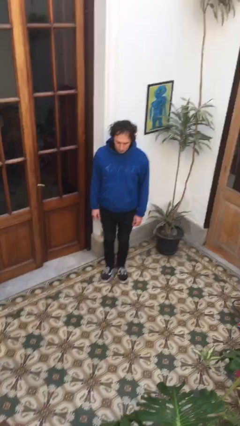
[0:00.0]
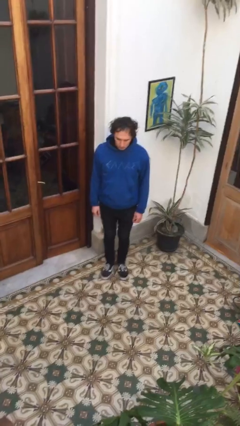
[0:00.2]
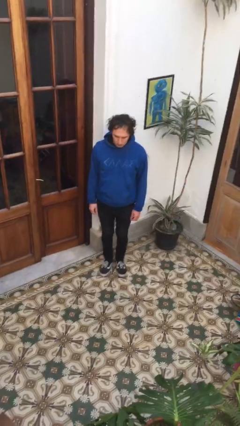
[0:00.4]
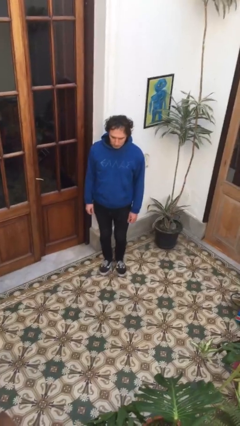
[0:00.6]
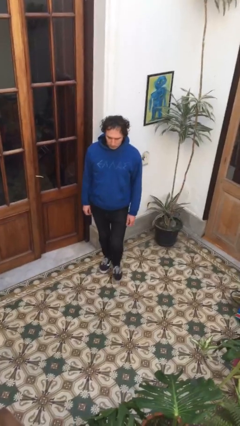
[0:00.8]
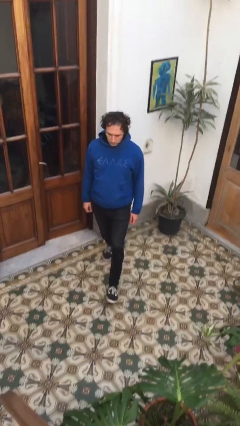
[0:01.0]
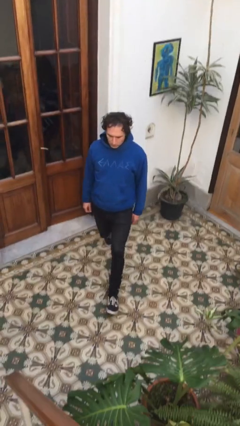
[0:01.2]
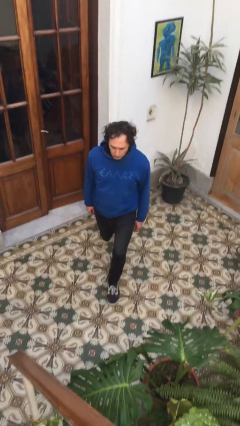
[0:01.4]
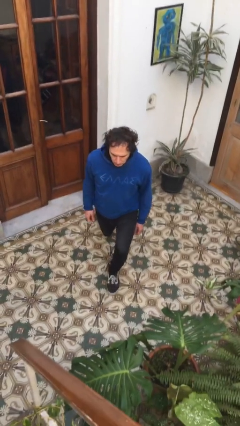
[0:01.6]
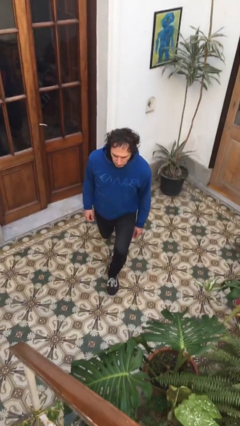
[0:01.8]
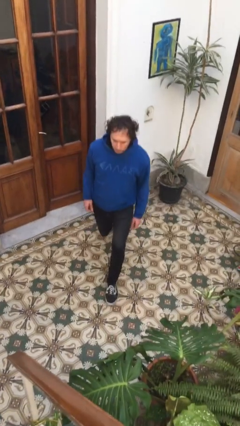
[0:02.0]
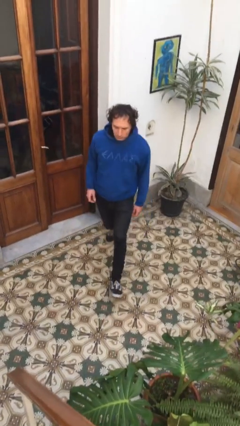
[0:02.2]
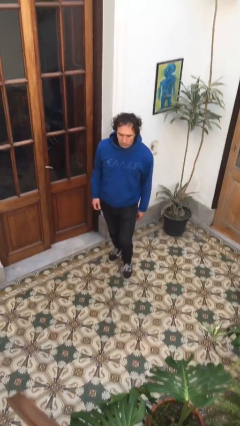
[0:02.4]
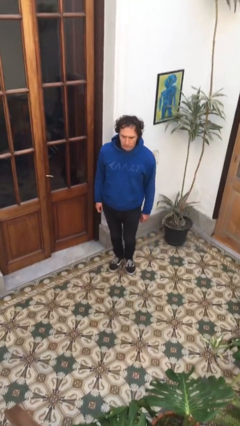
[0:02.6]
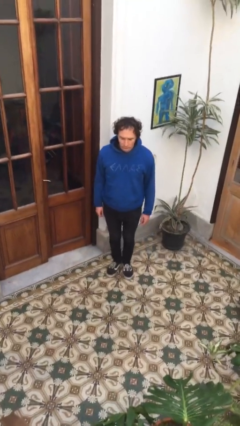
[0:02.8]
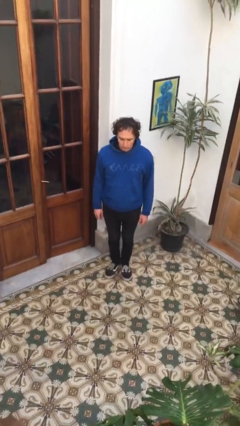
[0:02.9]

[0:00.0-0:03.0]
person exercises with lunges

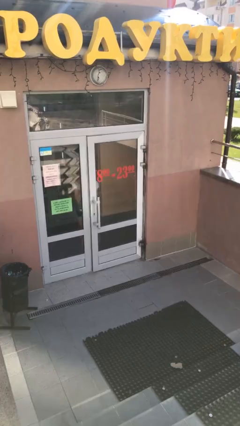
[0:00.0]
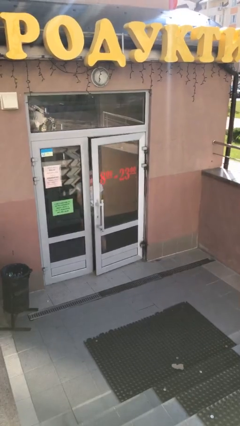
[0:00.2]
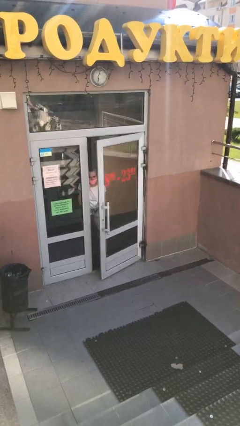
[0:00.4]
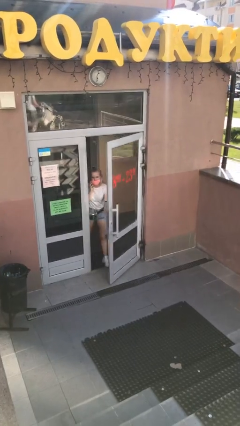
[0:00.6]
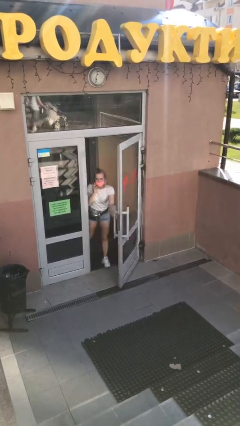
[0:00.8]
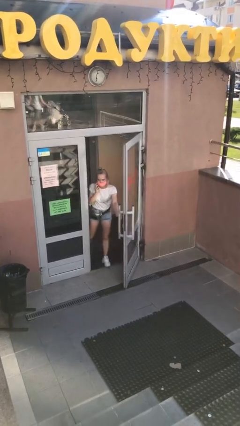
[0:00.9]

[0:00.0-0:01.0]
person opens facility door

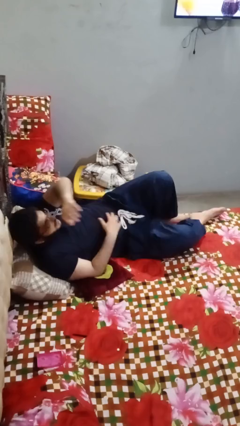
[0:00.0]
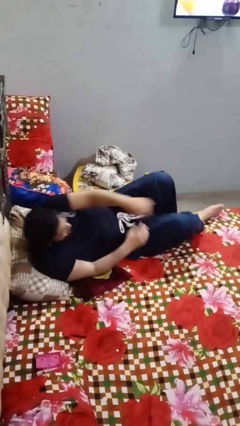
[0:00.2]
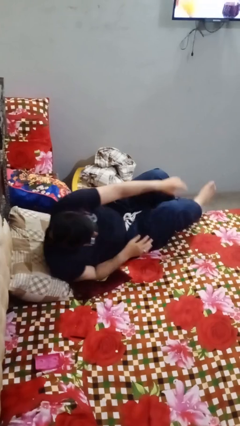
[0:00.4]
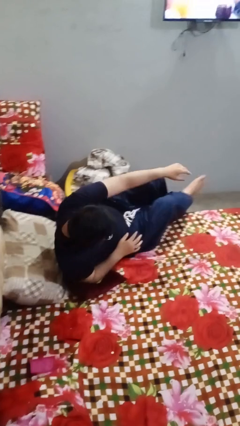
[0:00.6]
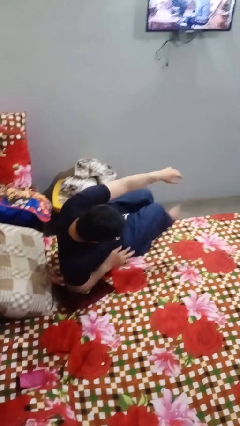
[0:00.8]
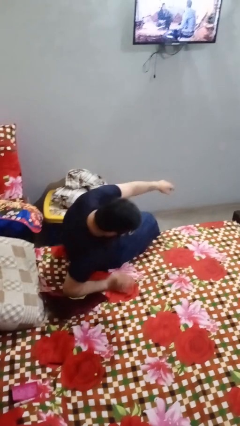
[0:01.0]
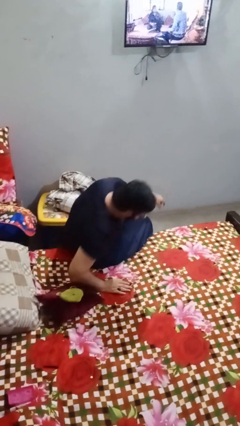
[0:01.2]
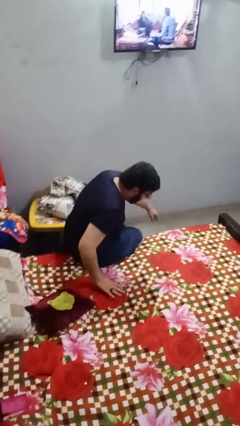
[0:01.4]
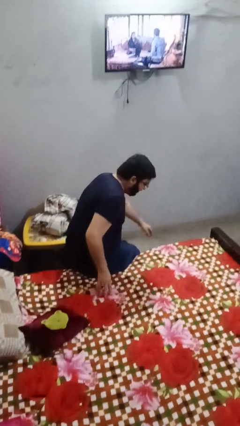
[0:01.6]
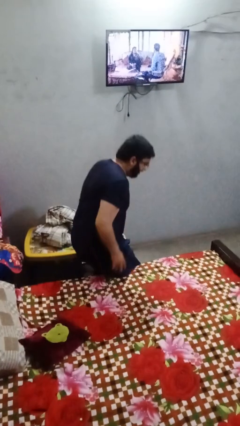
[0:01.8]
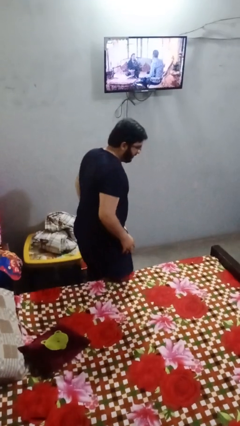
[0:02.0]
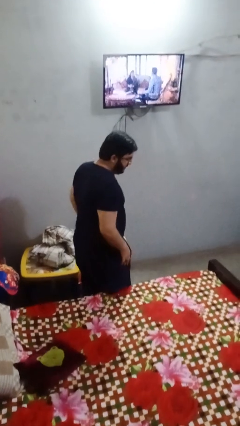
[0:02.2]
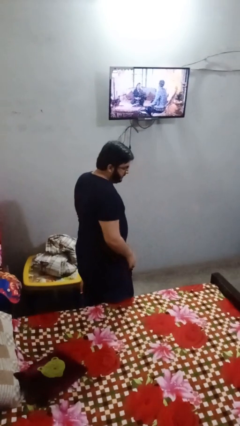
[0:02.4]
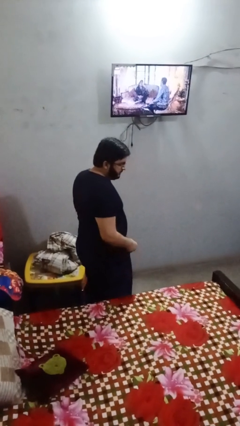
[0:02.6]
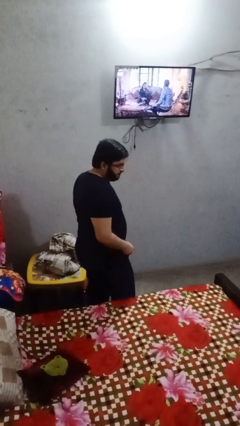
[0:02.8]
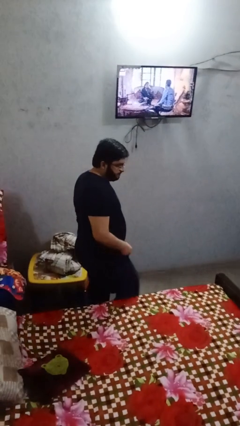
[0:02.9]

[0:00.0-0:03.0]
person stands up

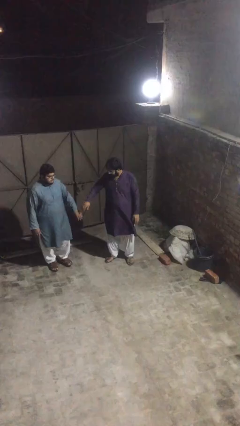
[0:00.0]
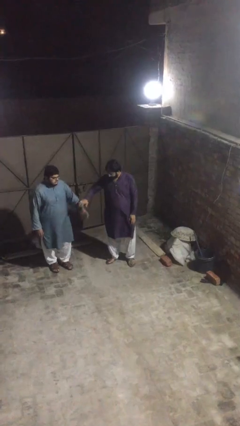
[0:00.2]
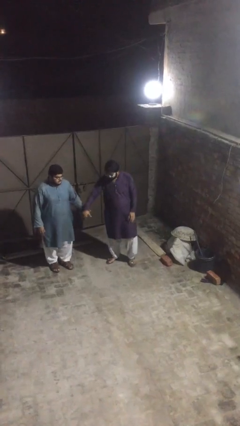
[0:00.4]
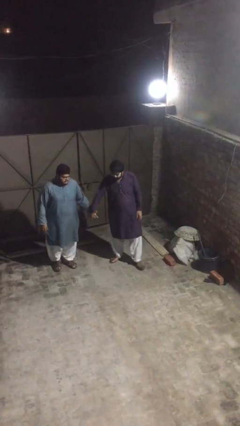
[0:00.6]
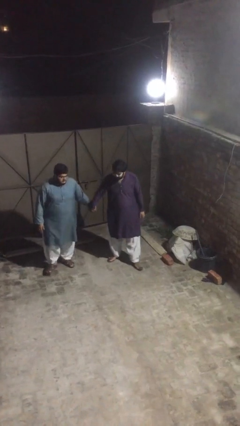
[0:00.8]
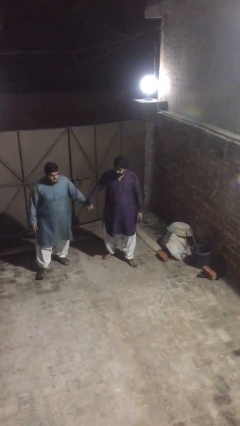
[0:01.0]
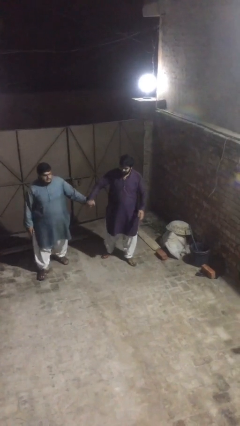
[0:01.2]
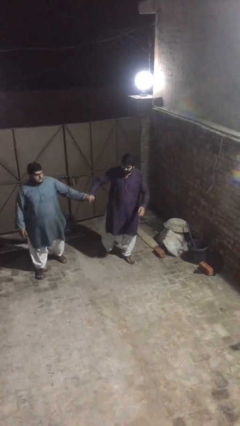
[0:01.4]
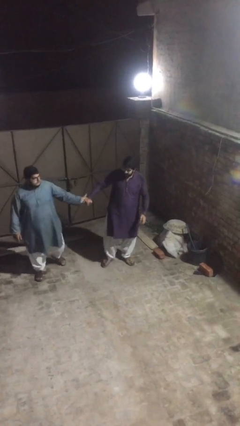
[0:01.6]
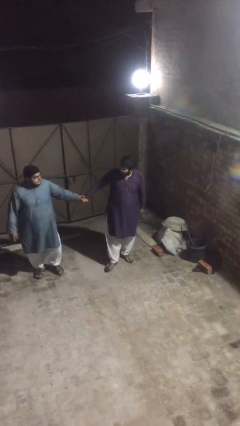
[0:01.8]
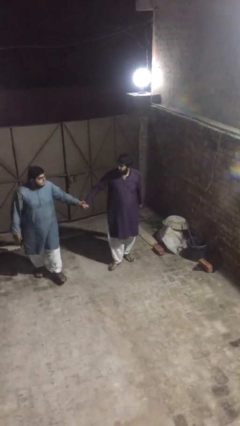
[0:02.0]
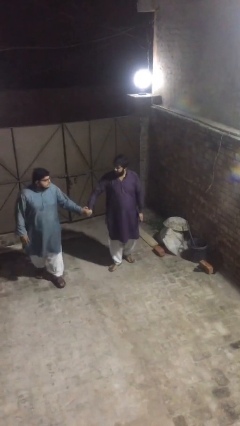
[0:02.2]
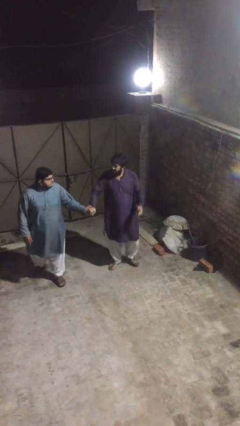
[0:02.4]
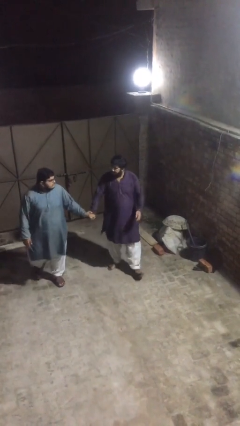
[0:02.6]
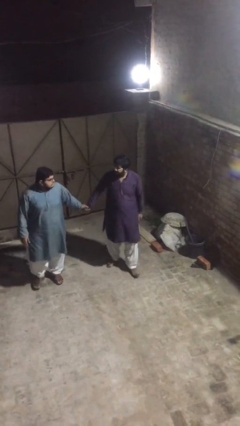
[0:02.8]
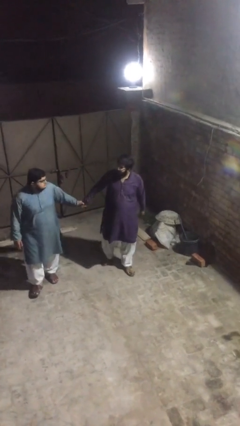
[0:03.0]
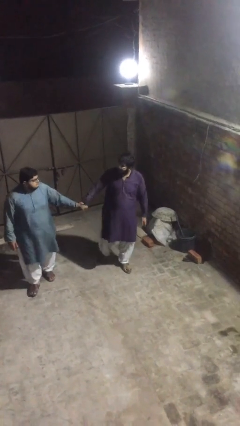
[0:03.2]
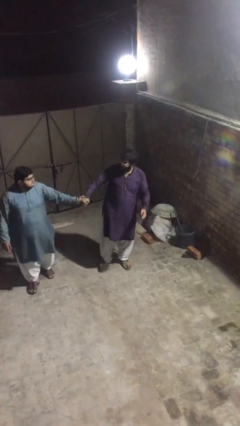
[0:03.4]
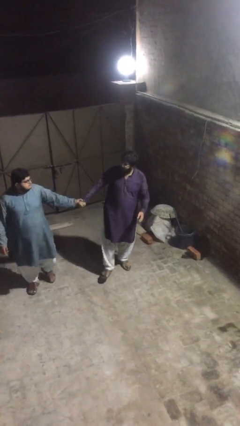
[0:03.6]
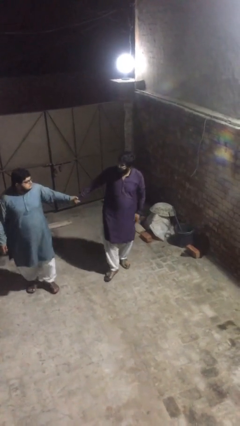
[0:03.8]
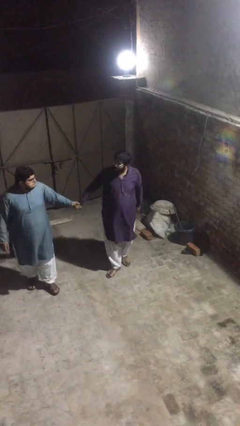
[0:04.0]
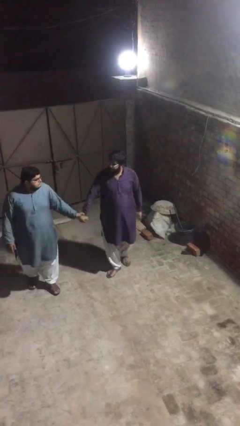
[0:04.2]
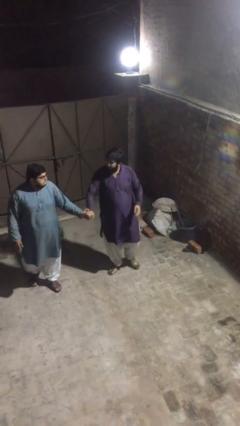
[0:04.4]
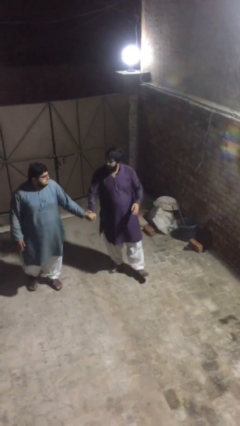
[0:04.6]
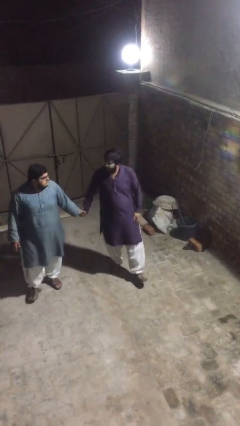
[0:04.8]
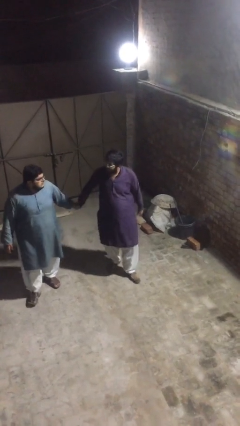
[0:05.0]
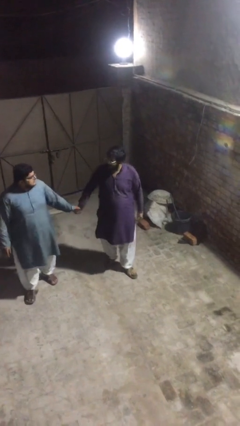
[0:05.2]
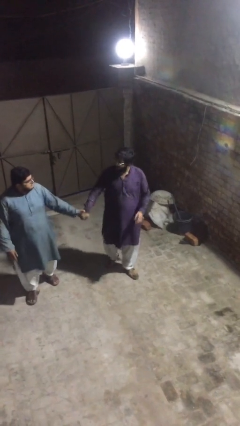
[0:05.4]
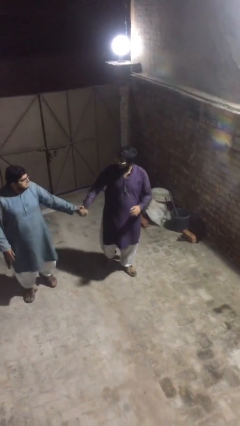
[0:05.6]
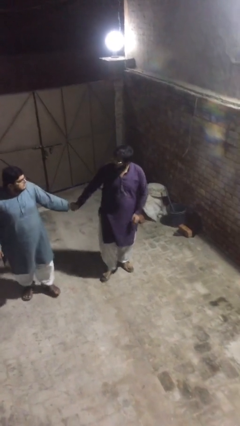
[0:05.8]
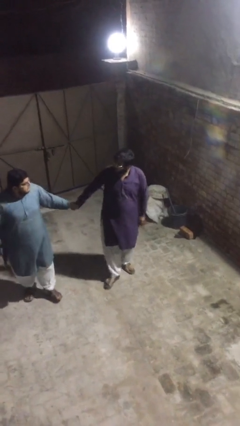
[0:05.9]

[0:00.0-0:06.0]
person holds hand

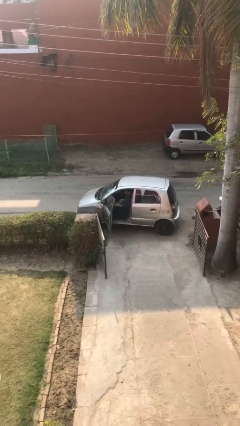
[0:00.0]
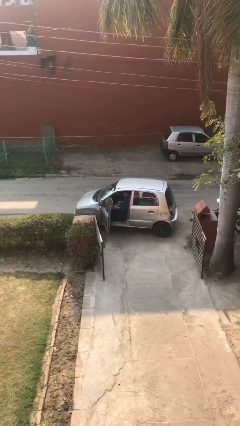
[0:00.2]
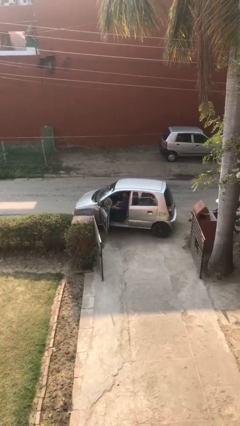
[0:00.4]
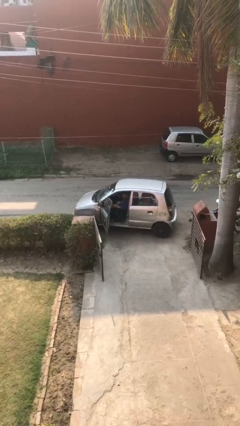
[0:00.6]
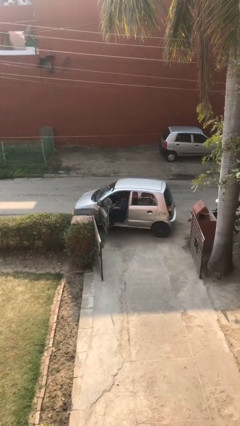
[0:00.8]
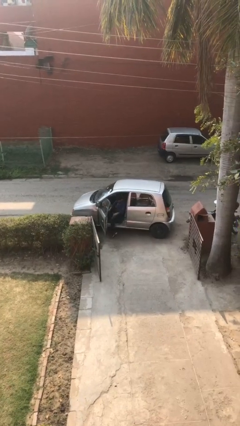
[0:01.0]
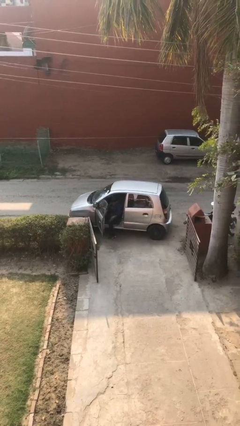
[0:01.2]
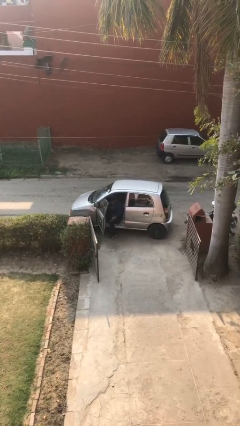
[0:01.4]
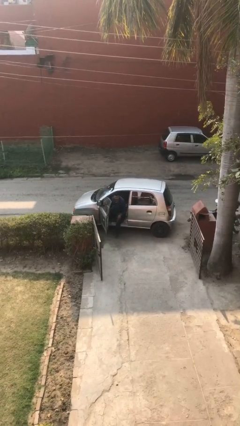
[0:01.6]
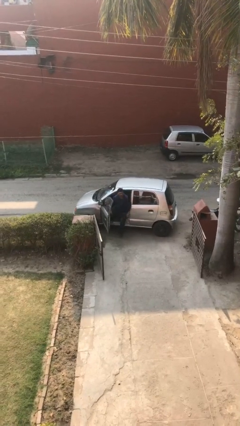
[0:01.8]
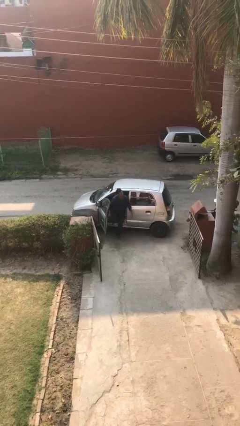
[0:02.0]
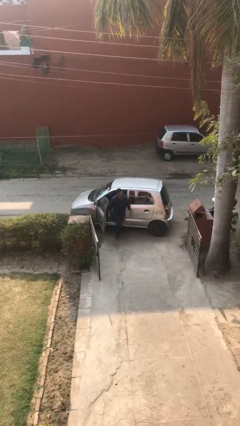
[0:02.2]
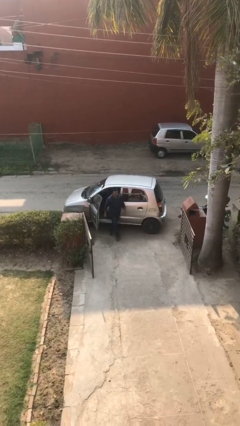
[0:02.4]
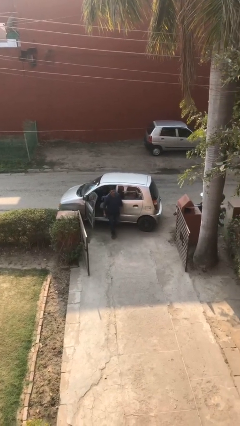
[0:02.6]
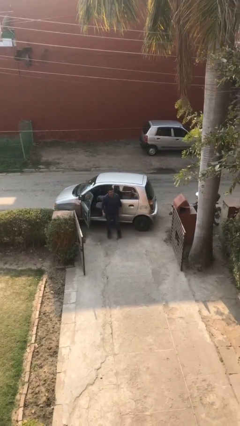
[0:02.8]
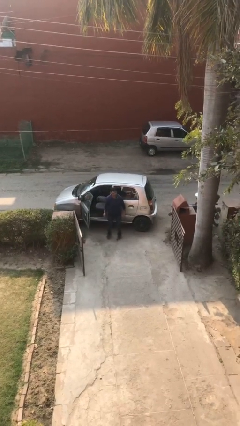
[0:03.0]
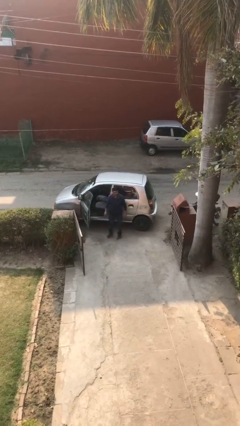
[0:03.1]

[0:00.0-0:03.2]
person exits car

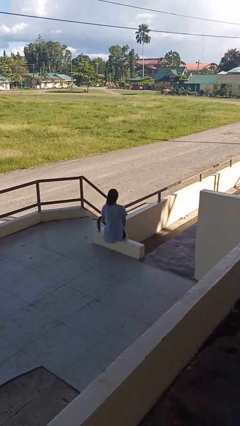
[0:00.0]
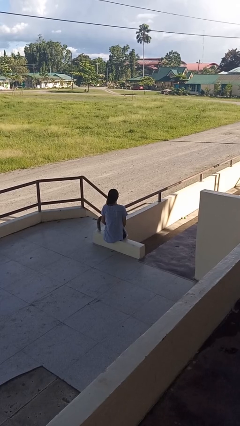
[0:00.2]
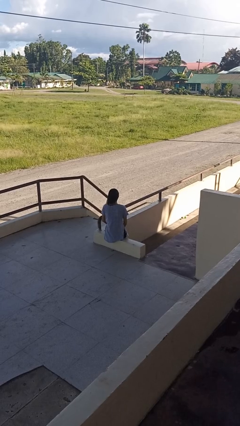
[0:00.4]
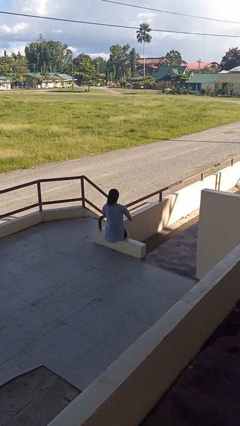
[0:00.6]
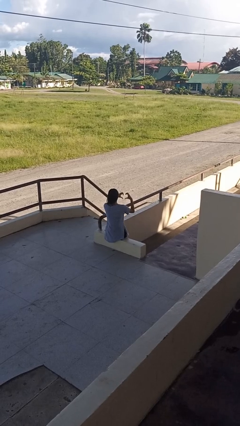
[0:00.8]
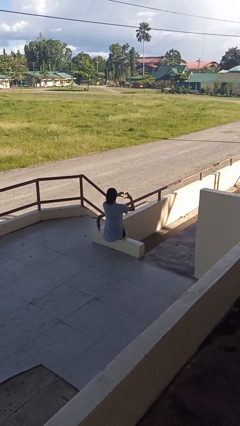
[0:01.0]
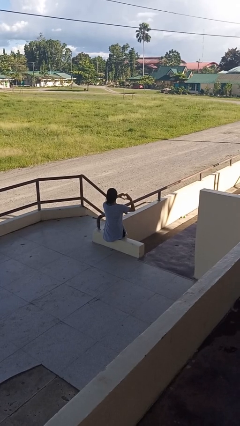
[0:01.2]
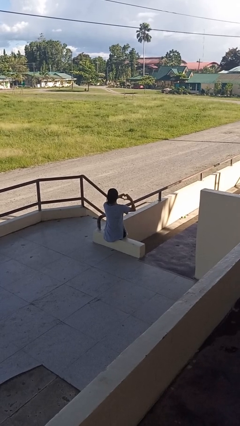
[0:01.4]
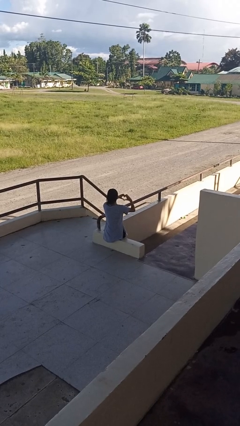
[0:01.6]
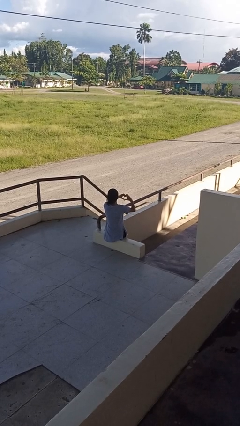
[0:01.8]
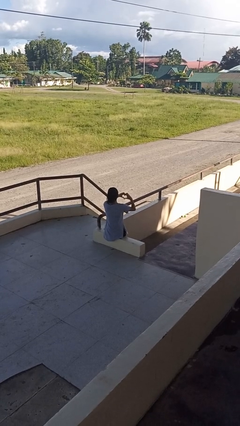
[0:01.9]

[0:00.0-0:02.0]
person gestures heart
